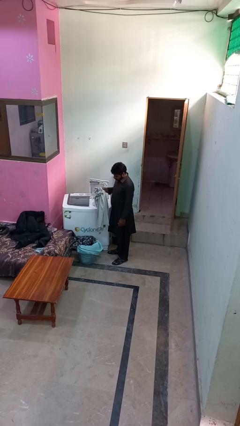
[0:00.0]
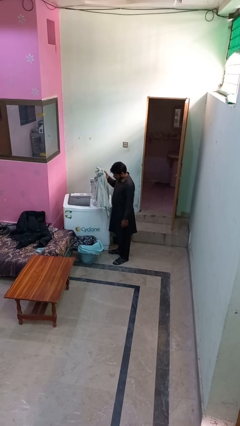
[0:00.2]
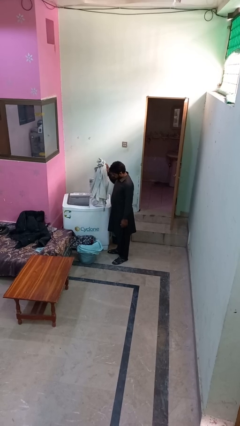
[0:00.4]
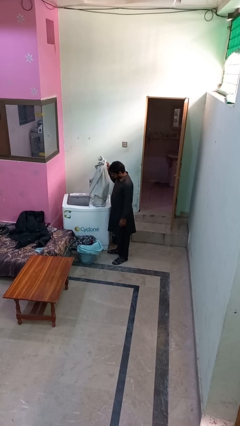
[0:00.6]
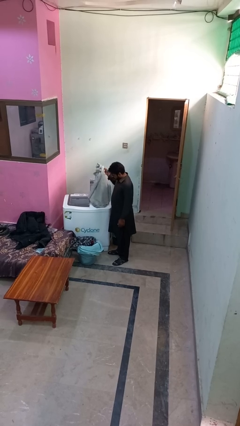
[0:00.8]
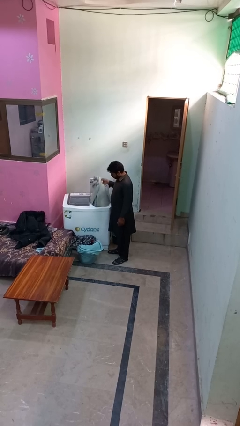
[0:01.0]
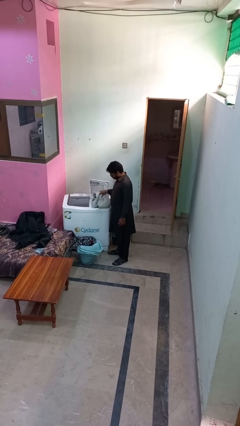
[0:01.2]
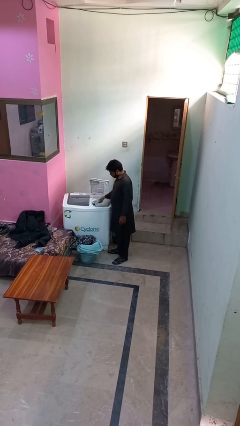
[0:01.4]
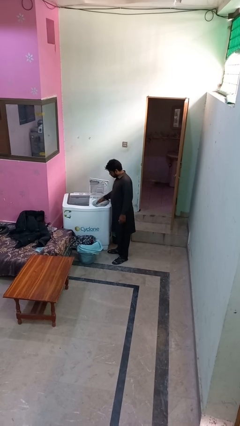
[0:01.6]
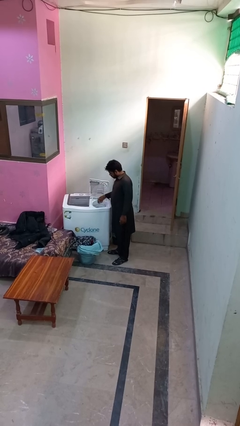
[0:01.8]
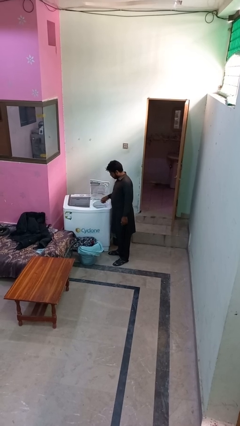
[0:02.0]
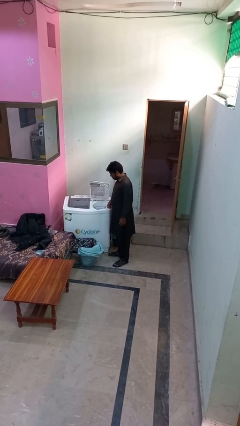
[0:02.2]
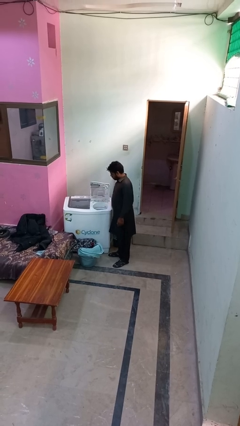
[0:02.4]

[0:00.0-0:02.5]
person loads dryer

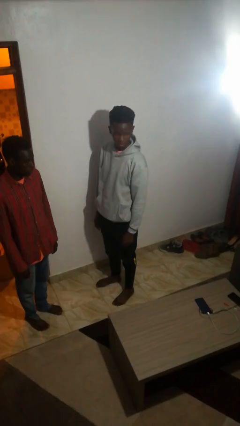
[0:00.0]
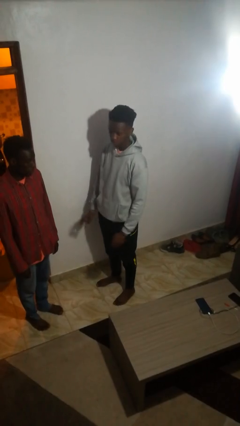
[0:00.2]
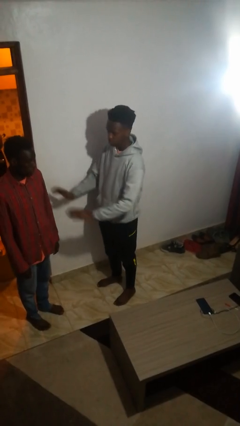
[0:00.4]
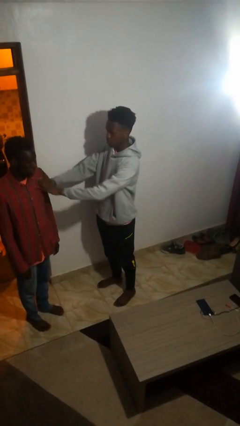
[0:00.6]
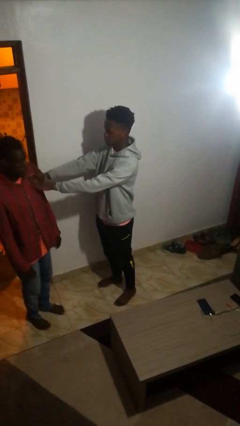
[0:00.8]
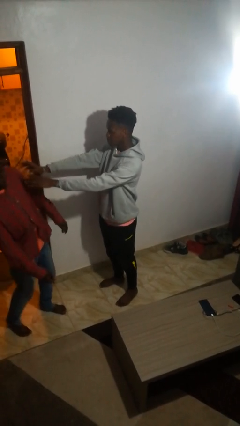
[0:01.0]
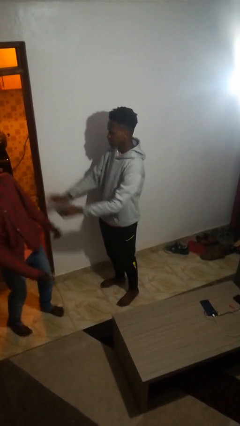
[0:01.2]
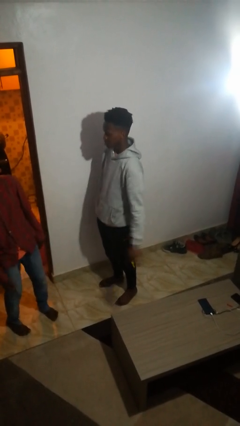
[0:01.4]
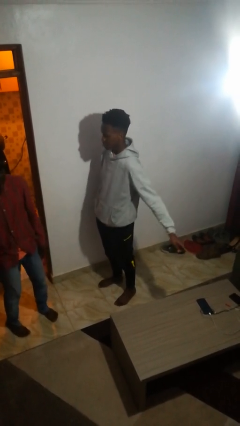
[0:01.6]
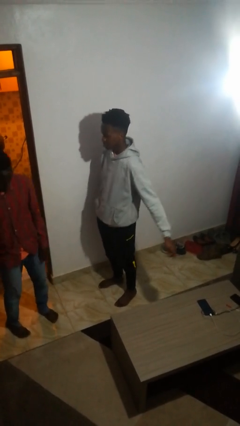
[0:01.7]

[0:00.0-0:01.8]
person shoves person

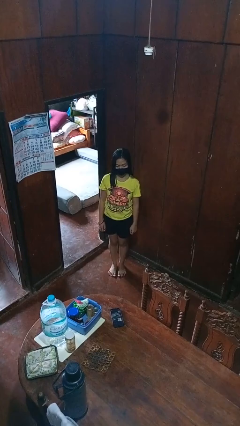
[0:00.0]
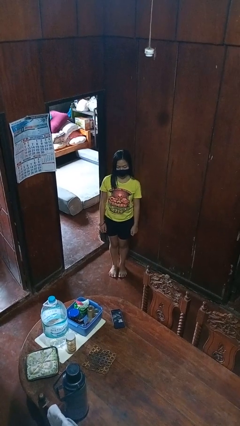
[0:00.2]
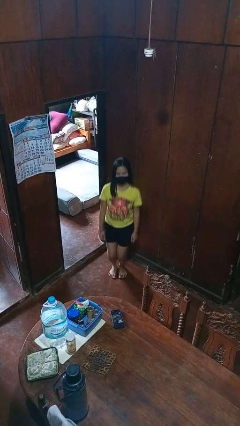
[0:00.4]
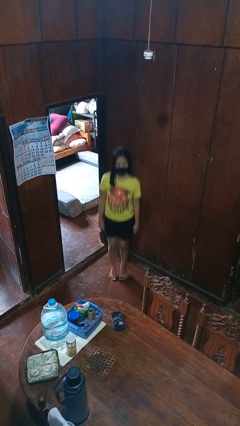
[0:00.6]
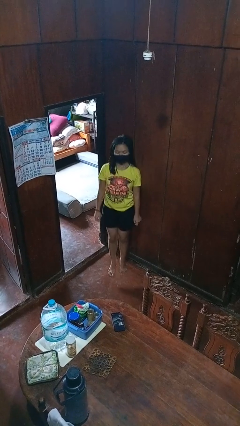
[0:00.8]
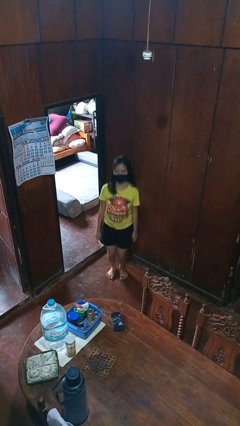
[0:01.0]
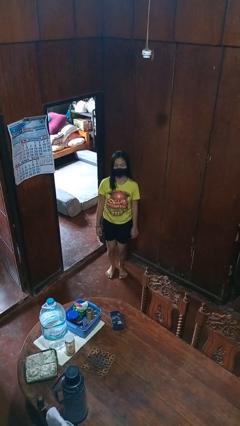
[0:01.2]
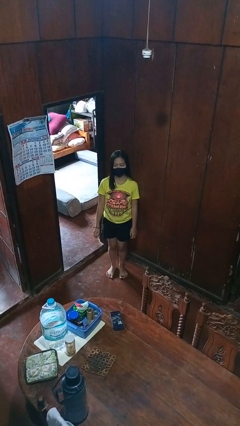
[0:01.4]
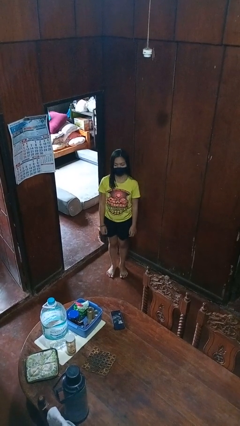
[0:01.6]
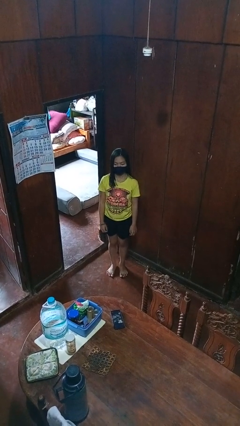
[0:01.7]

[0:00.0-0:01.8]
person jumps

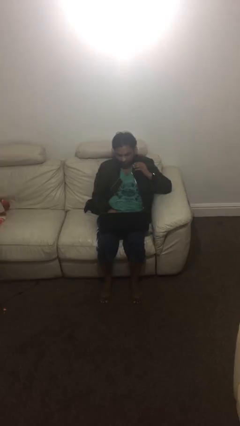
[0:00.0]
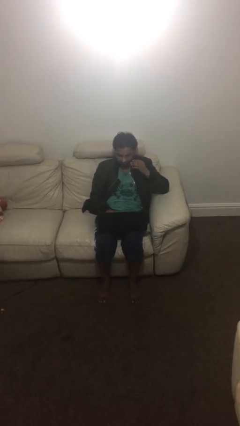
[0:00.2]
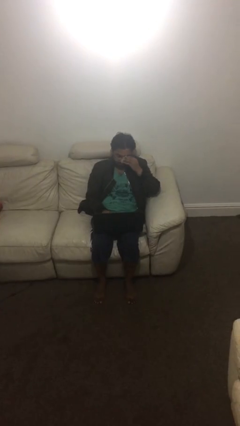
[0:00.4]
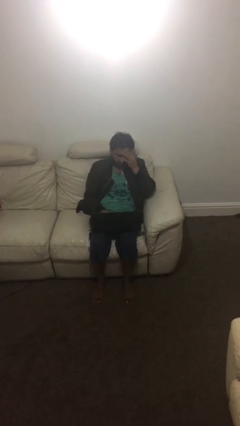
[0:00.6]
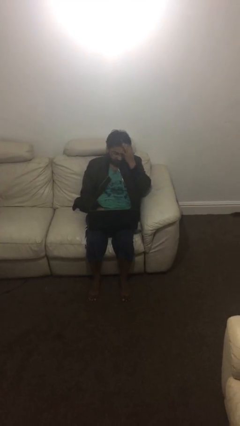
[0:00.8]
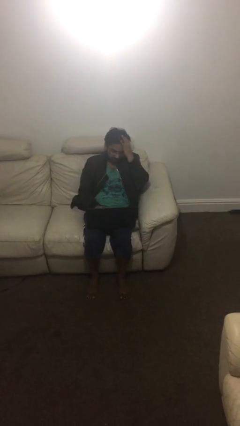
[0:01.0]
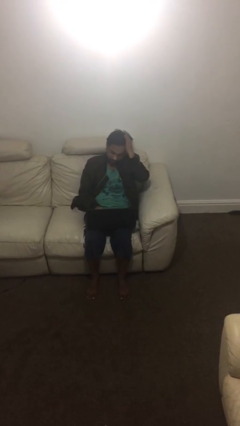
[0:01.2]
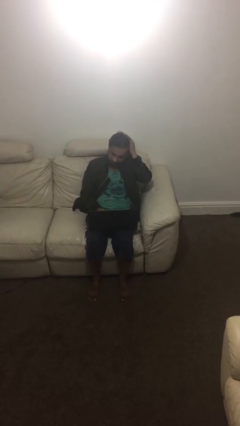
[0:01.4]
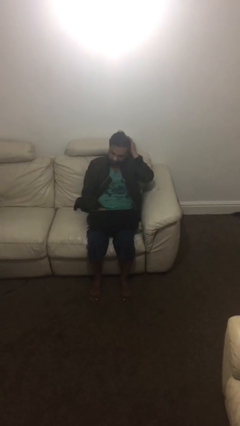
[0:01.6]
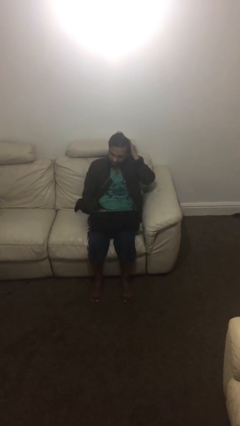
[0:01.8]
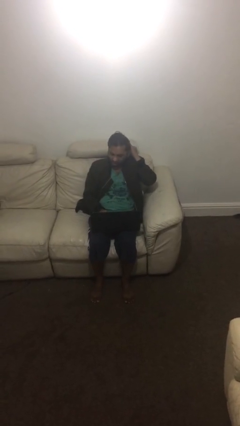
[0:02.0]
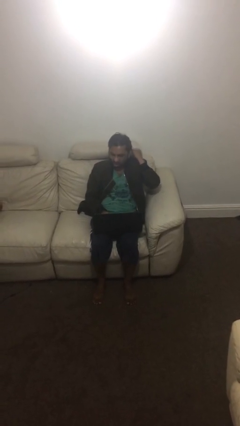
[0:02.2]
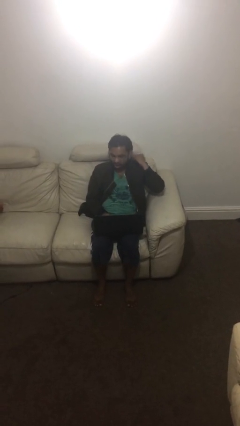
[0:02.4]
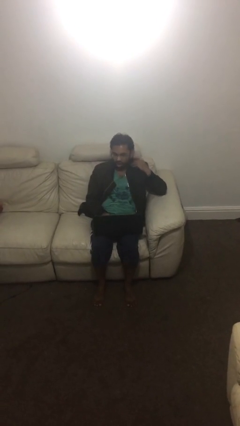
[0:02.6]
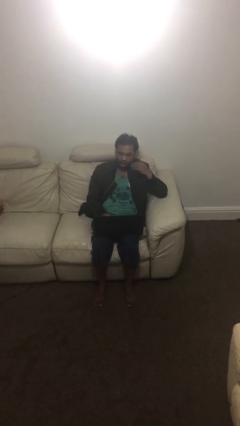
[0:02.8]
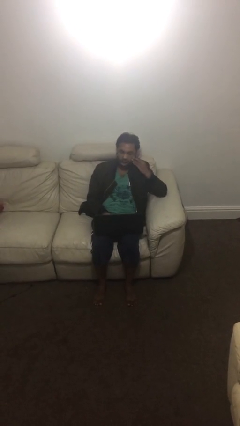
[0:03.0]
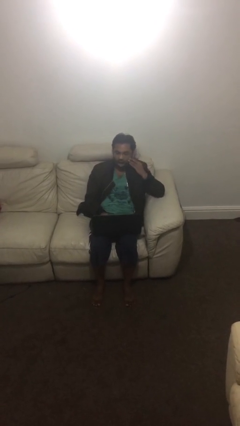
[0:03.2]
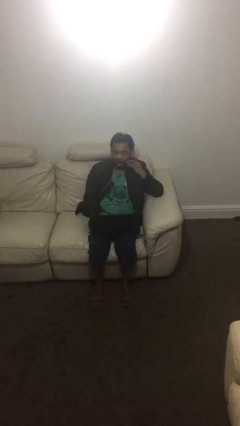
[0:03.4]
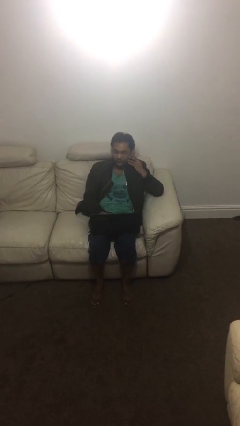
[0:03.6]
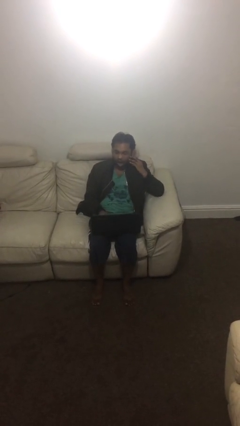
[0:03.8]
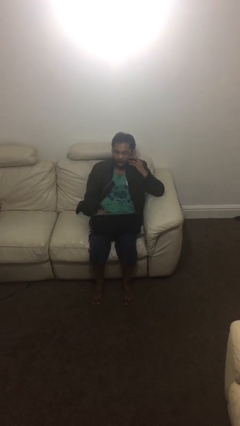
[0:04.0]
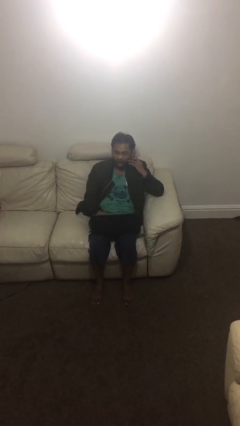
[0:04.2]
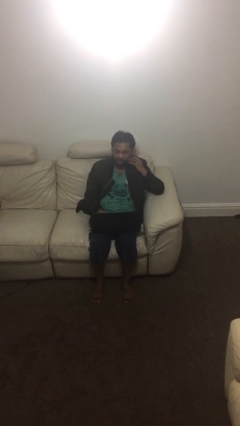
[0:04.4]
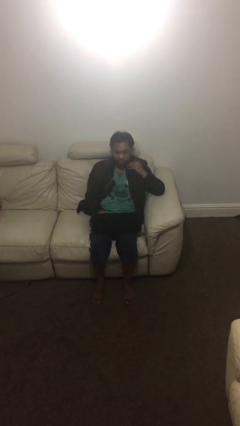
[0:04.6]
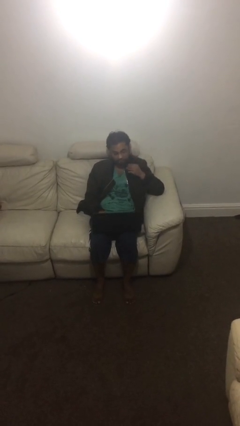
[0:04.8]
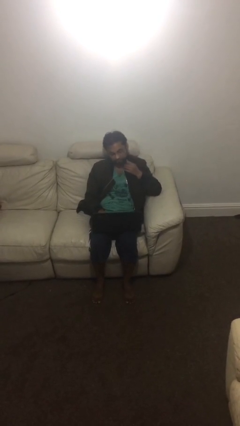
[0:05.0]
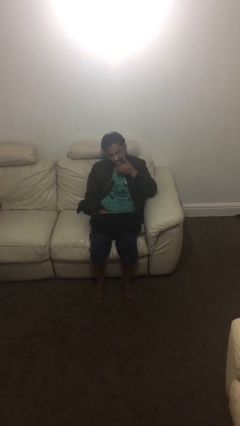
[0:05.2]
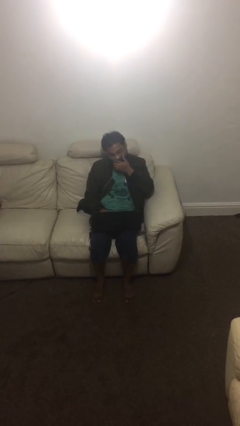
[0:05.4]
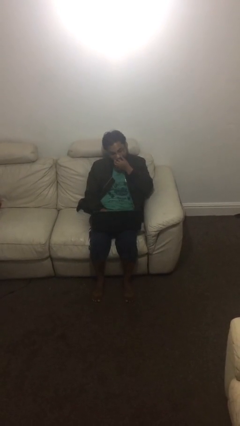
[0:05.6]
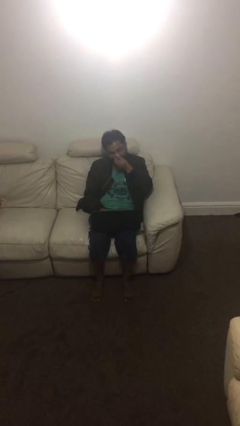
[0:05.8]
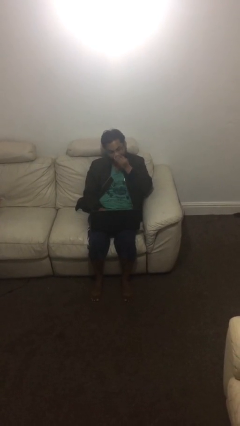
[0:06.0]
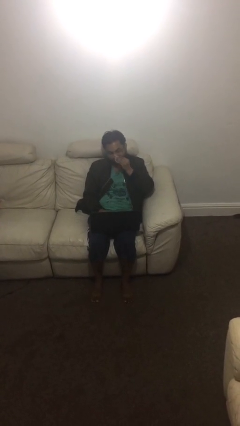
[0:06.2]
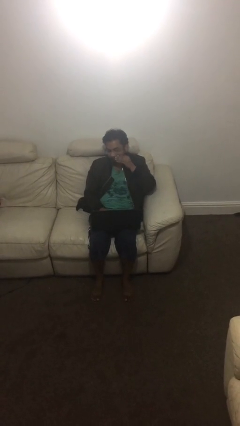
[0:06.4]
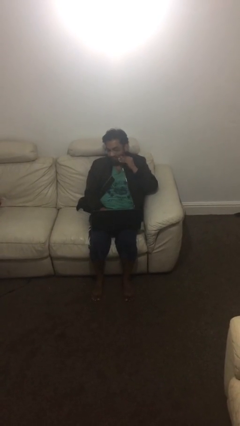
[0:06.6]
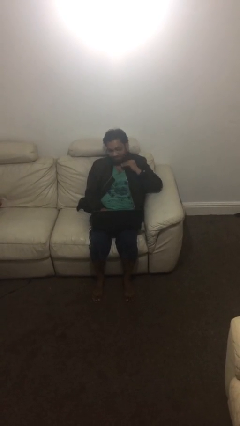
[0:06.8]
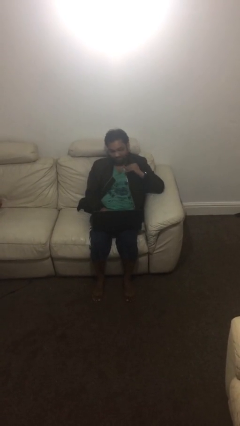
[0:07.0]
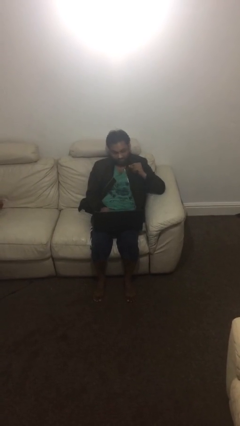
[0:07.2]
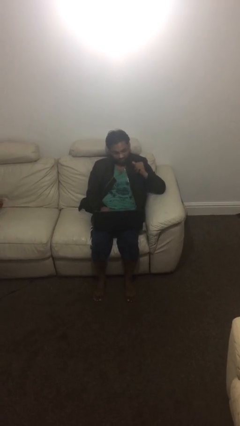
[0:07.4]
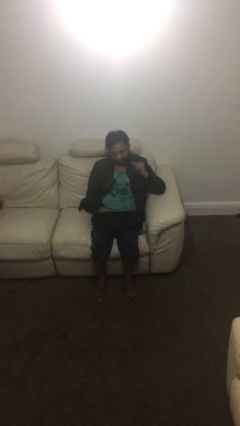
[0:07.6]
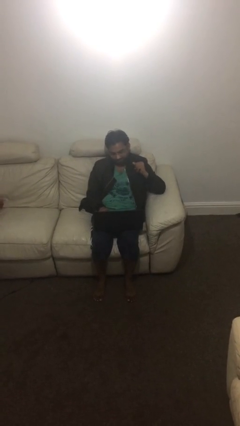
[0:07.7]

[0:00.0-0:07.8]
person interacts with laptop

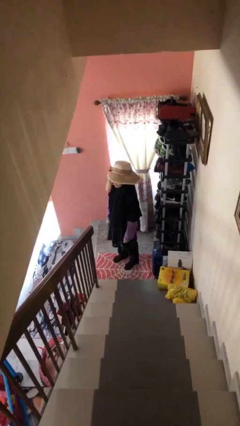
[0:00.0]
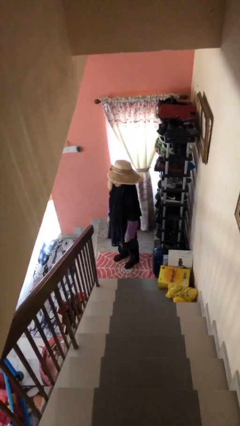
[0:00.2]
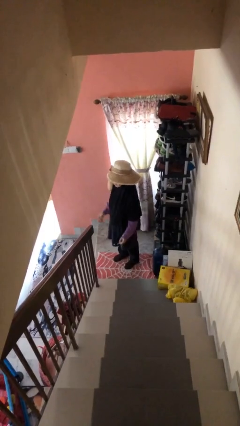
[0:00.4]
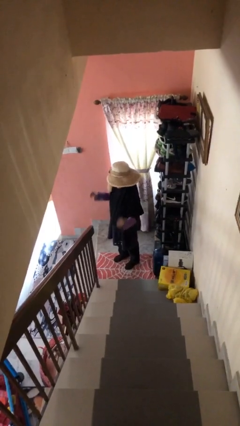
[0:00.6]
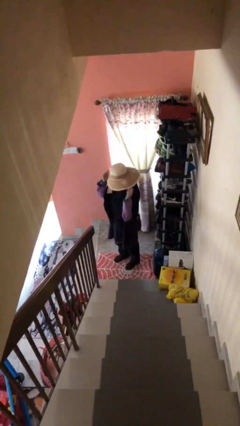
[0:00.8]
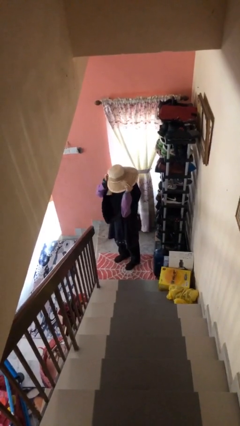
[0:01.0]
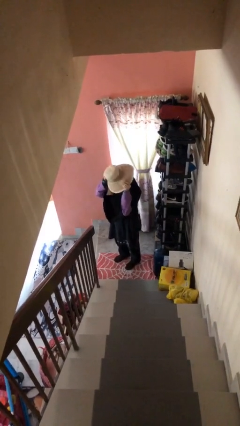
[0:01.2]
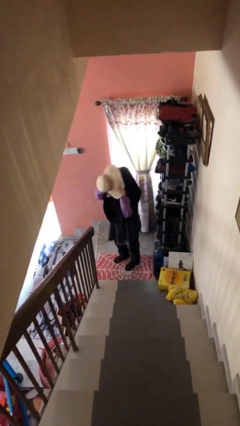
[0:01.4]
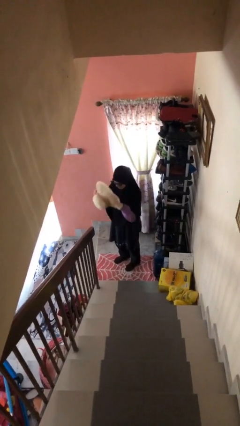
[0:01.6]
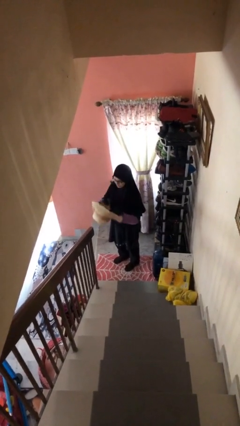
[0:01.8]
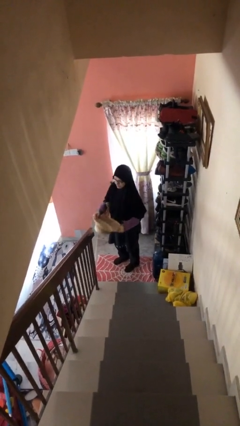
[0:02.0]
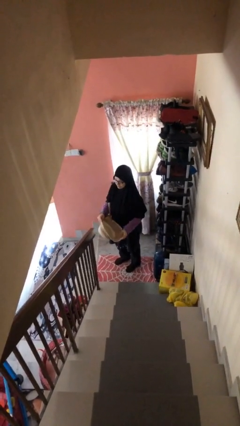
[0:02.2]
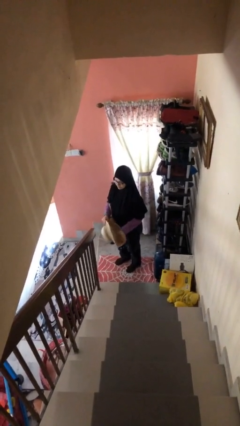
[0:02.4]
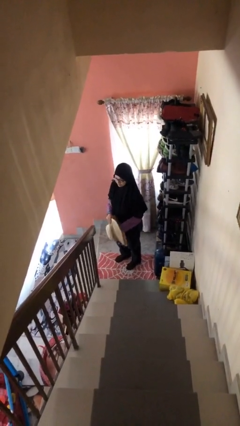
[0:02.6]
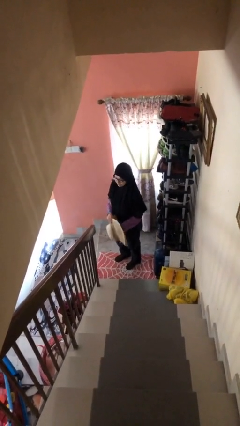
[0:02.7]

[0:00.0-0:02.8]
person takes off hat

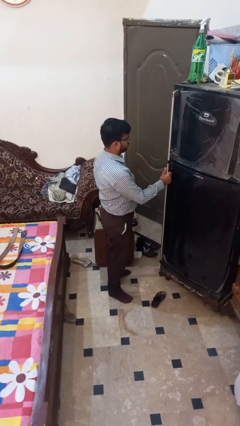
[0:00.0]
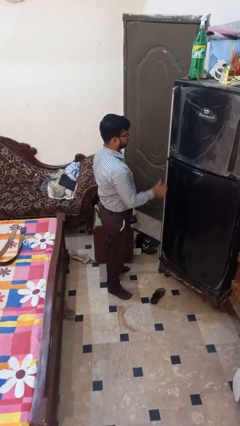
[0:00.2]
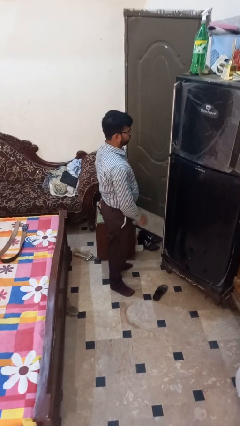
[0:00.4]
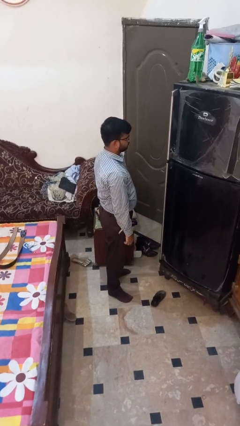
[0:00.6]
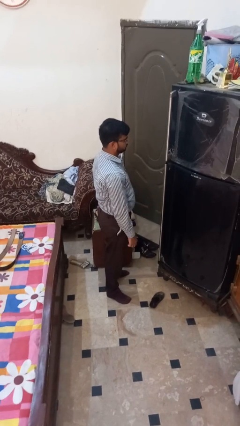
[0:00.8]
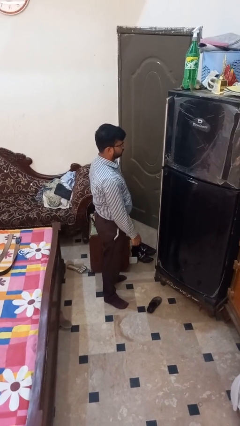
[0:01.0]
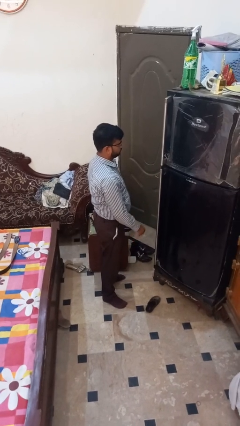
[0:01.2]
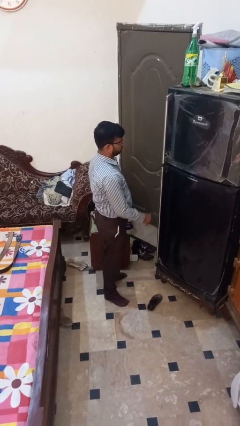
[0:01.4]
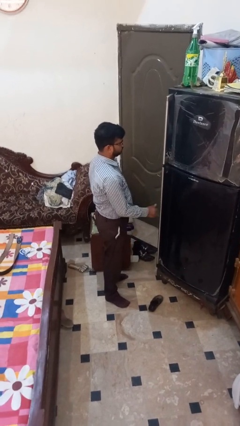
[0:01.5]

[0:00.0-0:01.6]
person closes refrigerator
